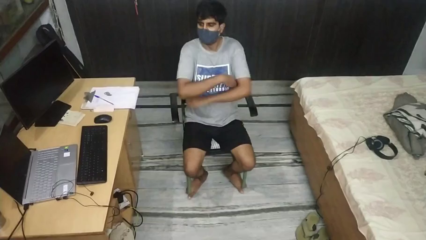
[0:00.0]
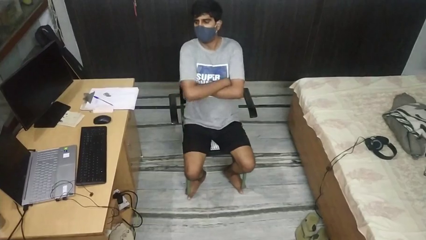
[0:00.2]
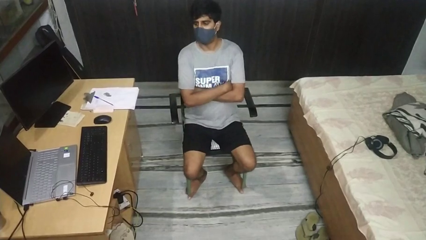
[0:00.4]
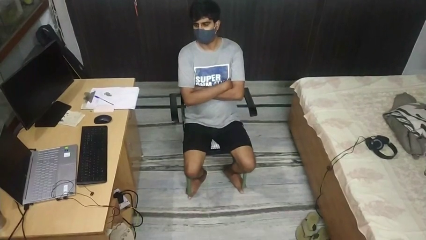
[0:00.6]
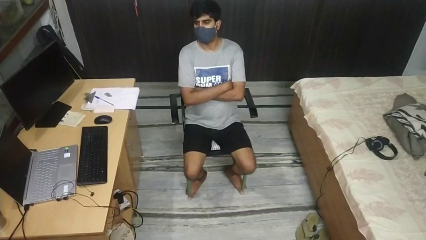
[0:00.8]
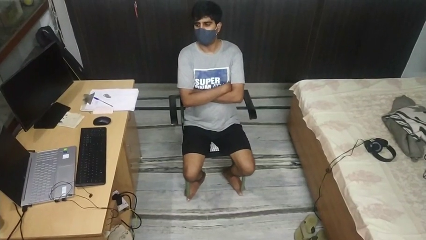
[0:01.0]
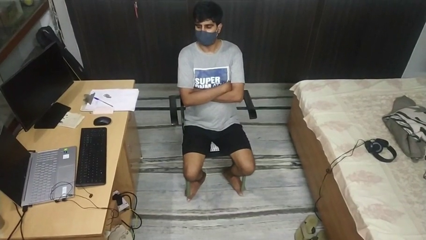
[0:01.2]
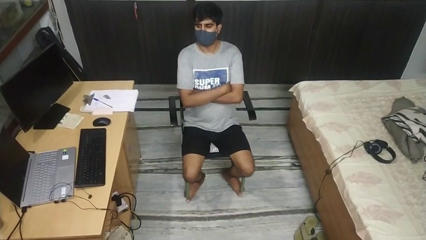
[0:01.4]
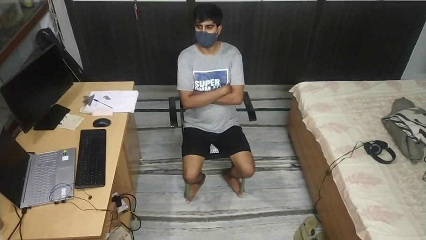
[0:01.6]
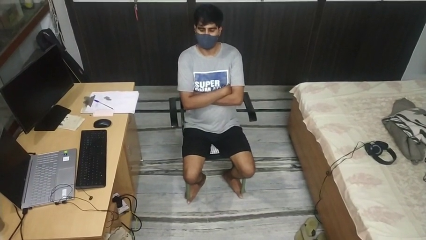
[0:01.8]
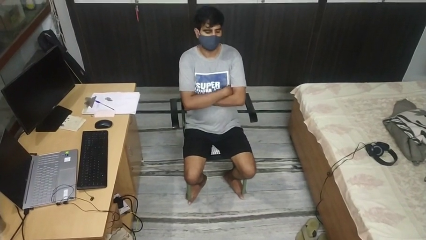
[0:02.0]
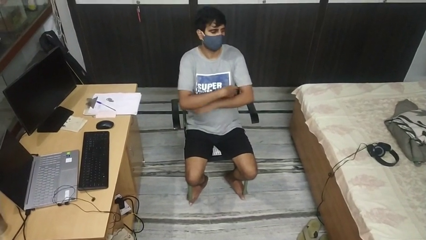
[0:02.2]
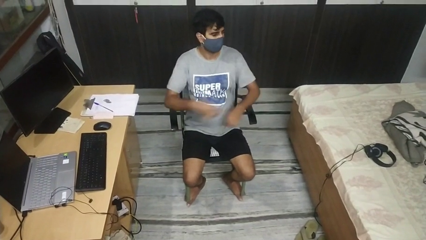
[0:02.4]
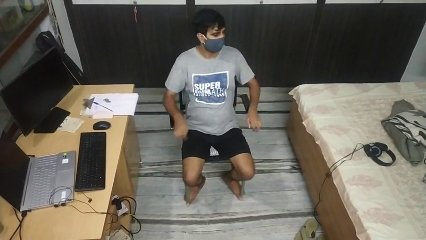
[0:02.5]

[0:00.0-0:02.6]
person crosses arms

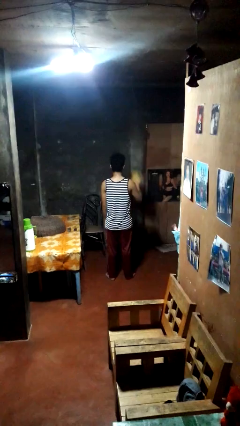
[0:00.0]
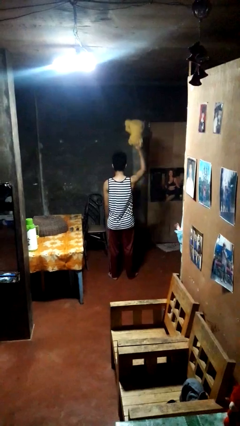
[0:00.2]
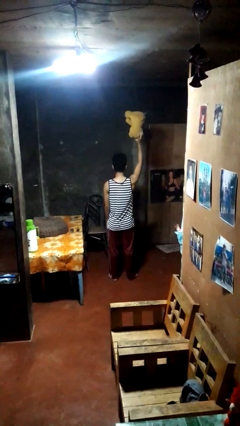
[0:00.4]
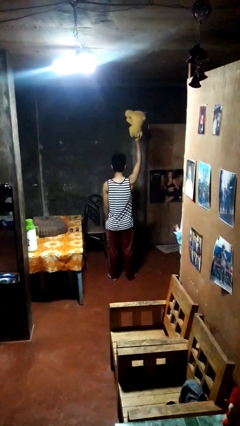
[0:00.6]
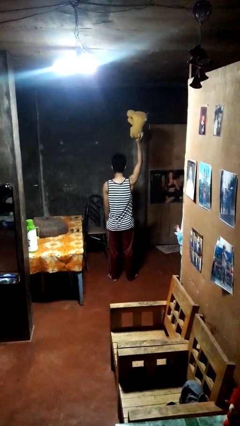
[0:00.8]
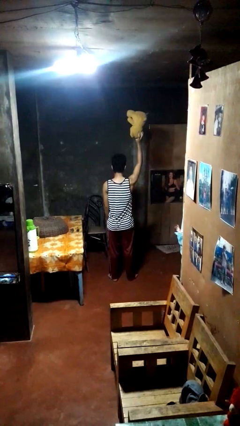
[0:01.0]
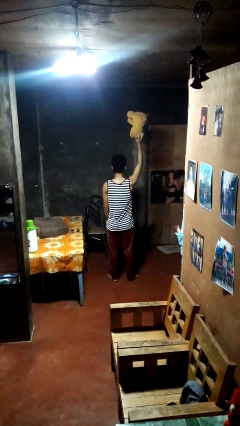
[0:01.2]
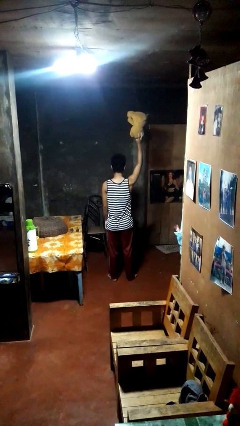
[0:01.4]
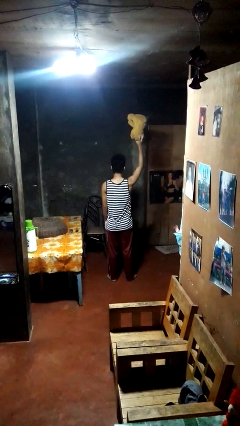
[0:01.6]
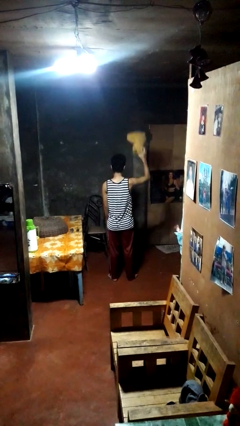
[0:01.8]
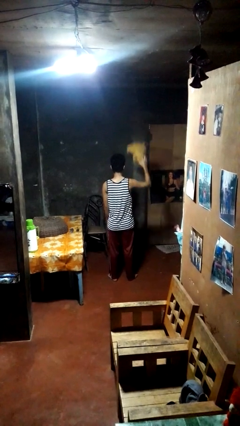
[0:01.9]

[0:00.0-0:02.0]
person holds object above head

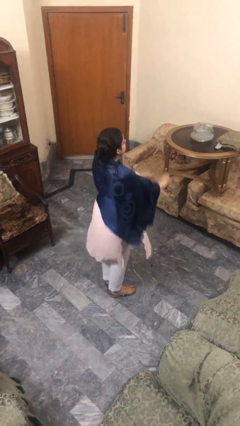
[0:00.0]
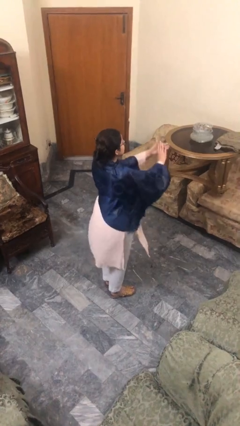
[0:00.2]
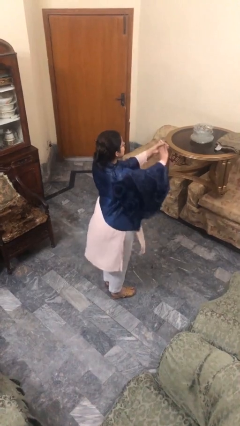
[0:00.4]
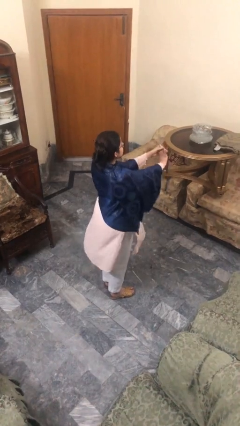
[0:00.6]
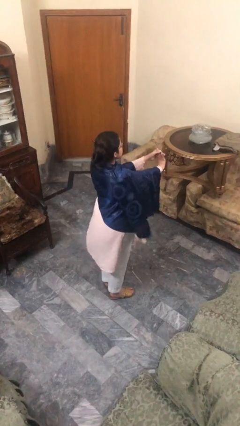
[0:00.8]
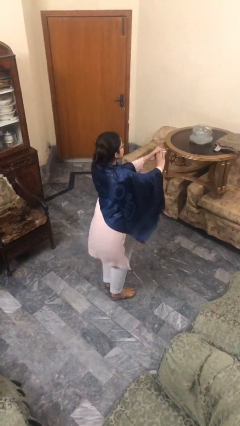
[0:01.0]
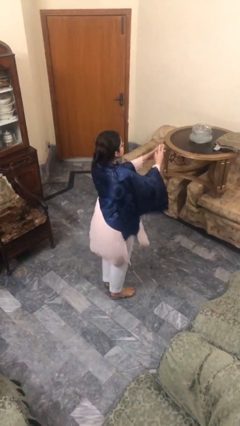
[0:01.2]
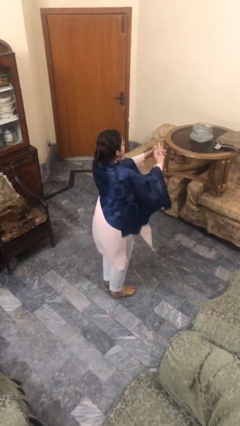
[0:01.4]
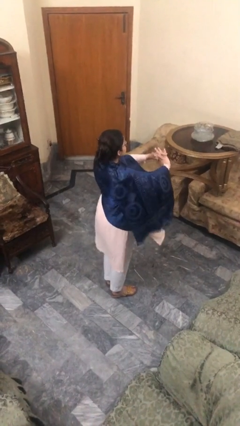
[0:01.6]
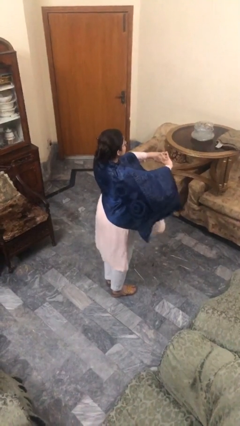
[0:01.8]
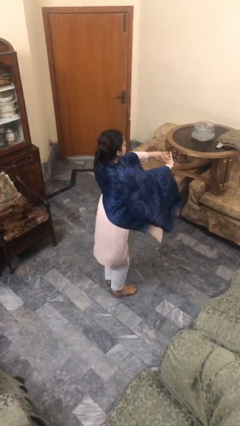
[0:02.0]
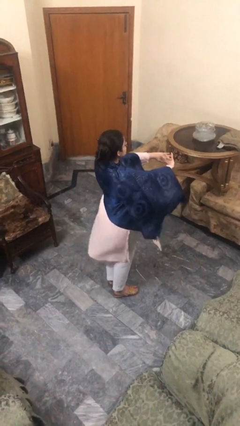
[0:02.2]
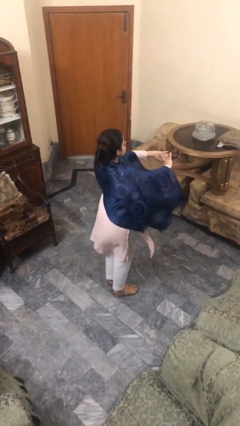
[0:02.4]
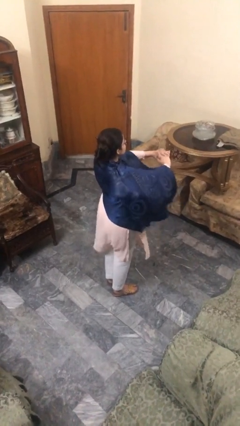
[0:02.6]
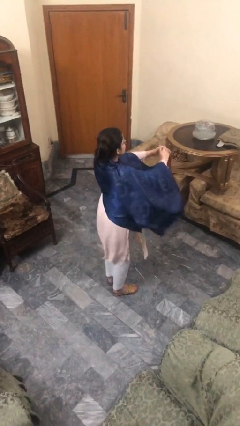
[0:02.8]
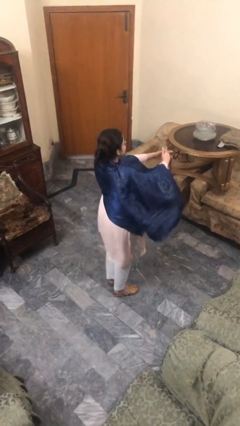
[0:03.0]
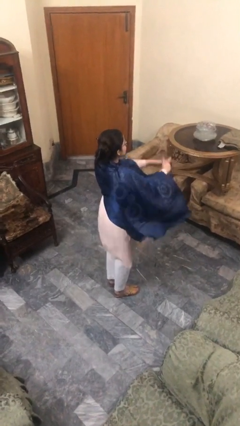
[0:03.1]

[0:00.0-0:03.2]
person cracks knuckles

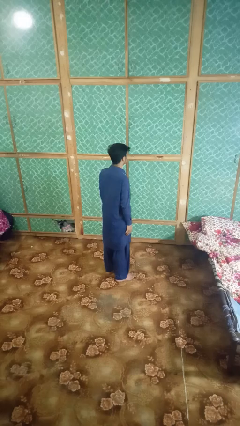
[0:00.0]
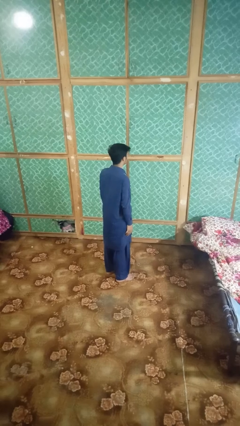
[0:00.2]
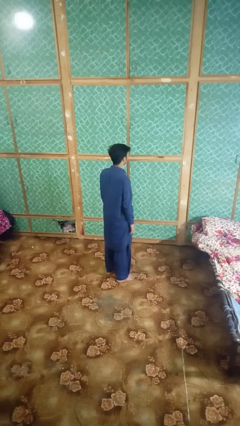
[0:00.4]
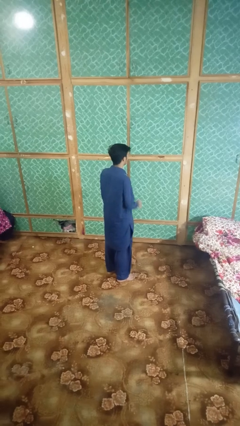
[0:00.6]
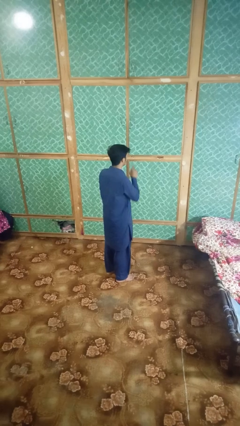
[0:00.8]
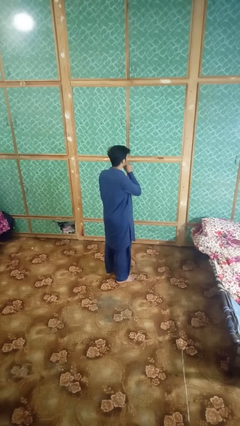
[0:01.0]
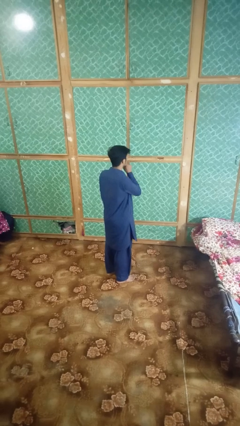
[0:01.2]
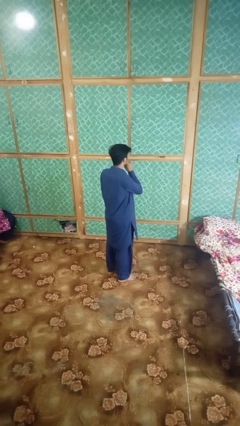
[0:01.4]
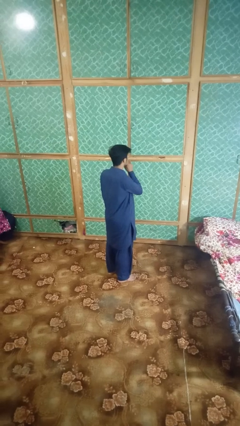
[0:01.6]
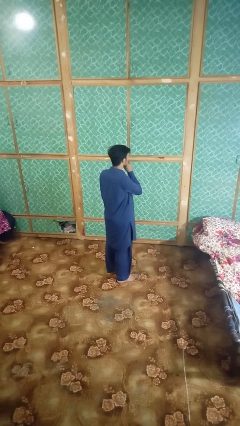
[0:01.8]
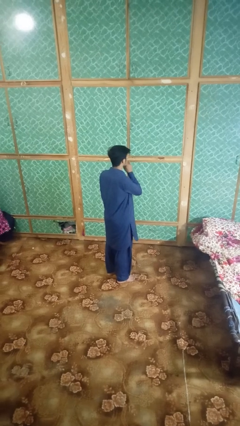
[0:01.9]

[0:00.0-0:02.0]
person gestures be quiet

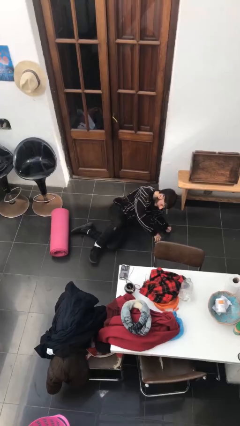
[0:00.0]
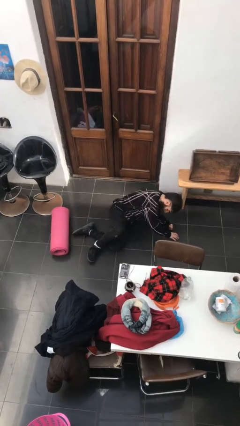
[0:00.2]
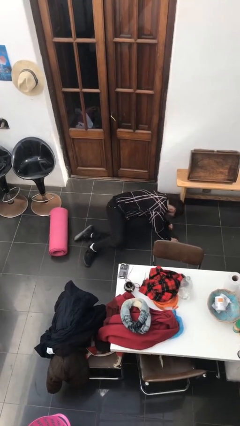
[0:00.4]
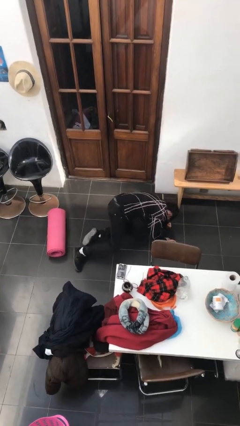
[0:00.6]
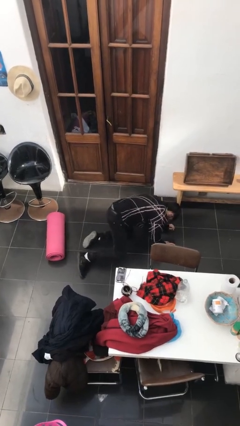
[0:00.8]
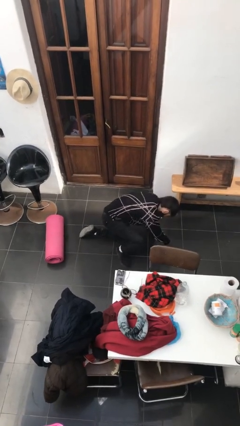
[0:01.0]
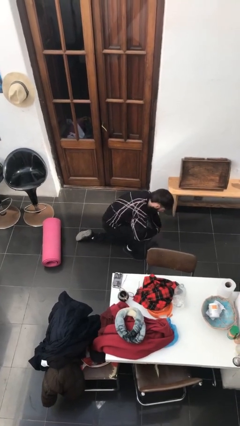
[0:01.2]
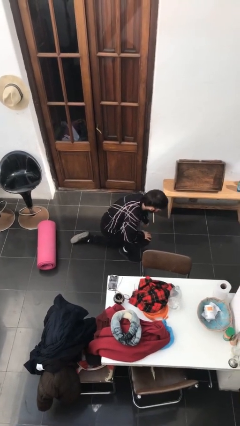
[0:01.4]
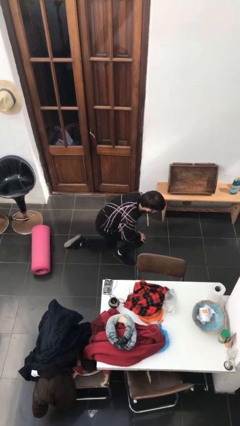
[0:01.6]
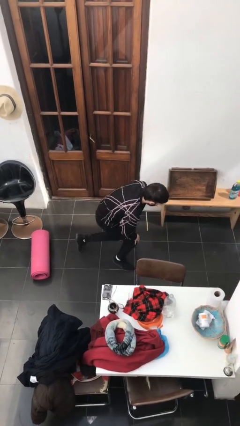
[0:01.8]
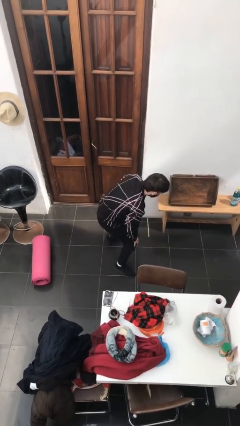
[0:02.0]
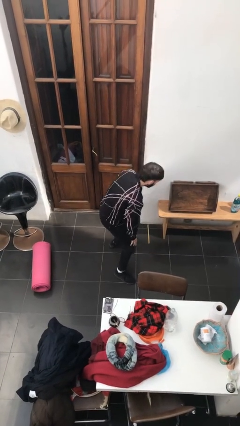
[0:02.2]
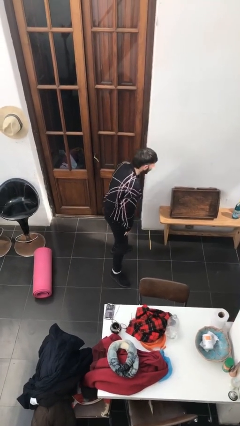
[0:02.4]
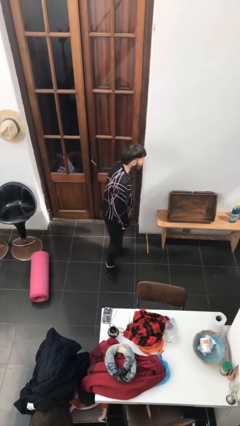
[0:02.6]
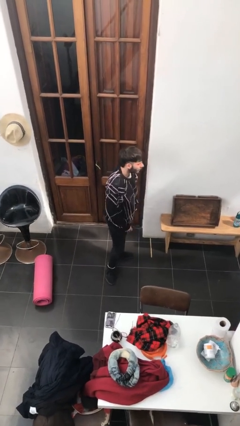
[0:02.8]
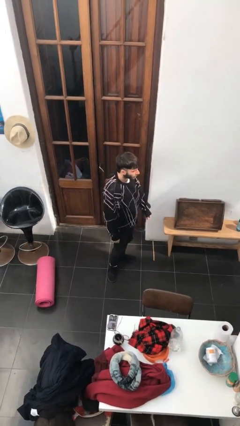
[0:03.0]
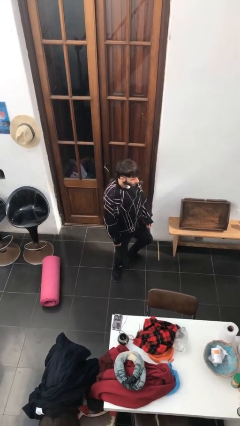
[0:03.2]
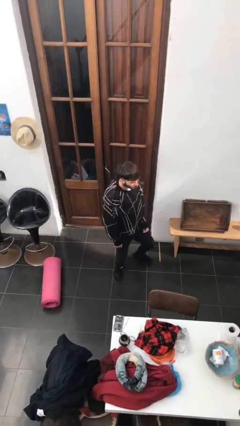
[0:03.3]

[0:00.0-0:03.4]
person stands up from floor

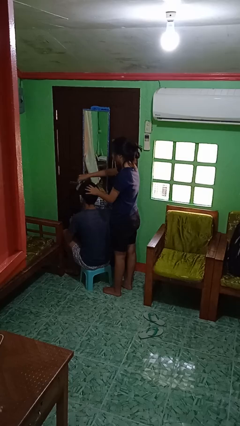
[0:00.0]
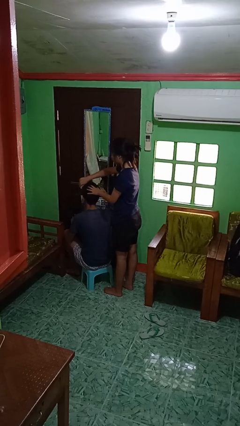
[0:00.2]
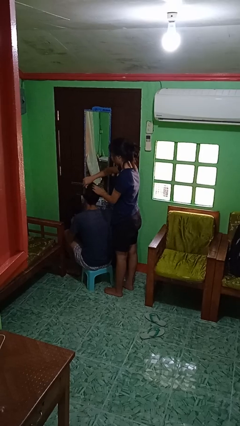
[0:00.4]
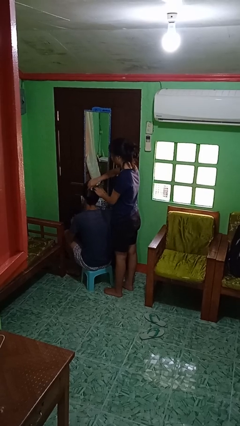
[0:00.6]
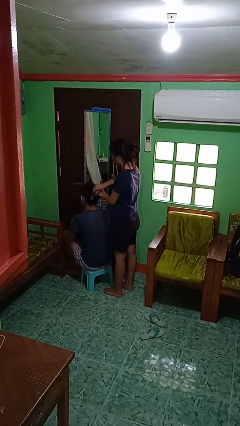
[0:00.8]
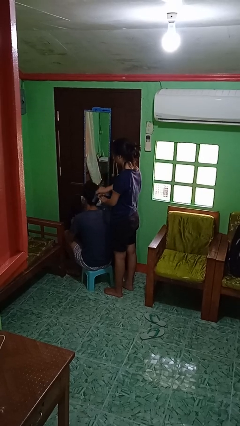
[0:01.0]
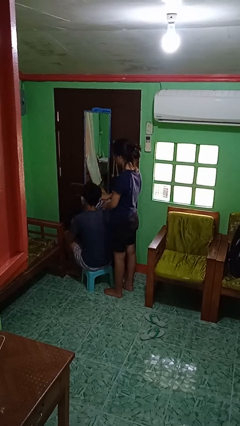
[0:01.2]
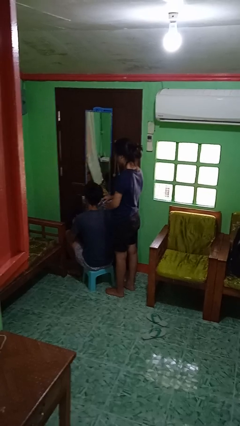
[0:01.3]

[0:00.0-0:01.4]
person brushes hair of person

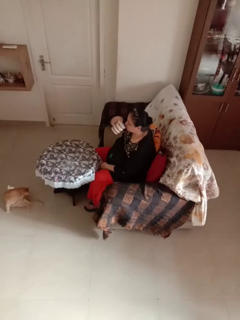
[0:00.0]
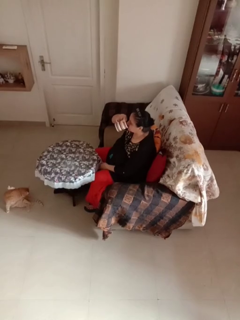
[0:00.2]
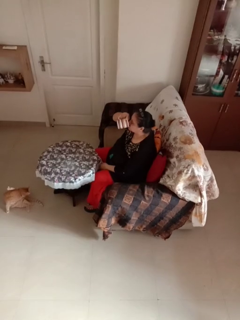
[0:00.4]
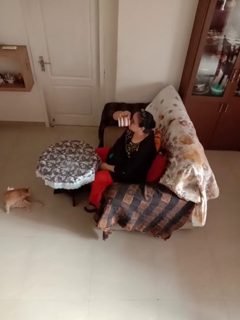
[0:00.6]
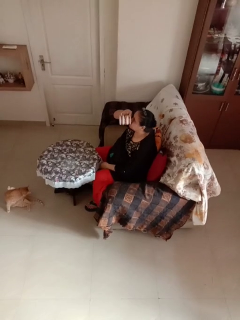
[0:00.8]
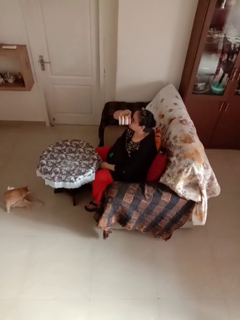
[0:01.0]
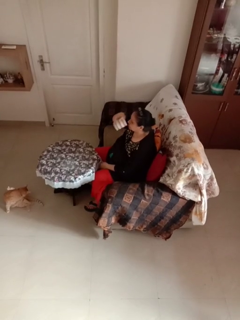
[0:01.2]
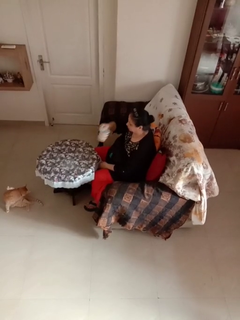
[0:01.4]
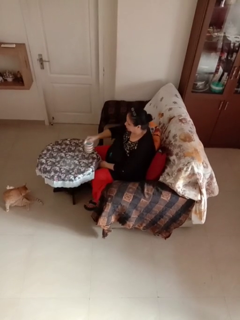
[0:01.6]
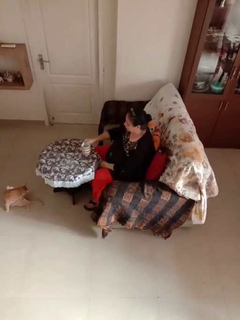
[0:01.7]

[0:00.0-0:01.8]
person drinks from mug

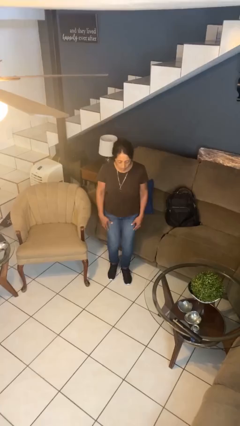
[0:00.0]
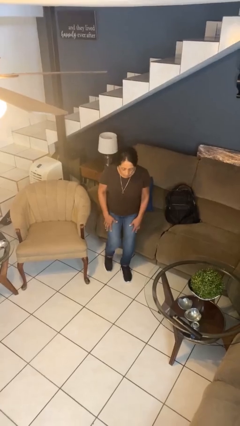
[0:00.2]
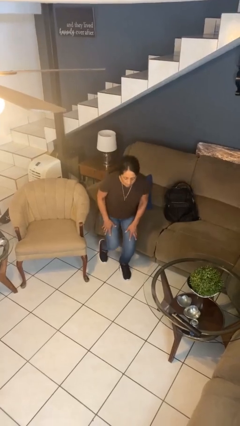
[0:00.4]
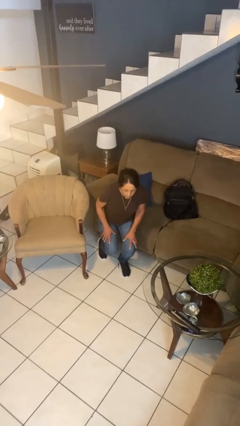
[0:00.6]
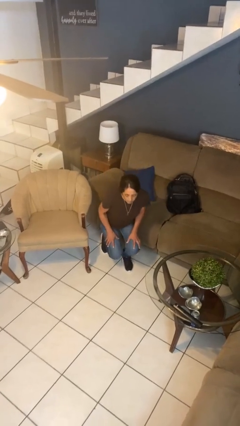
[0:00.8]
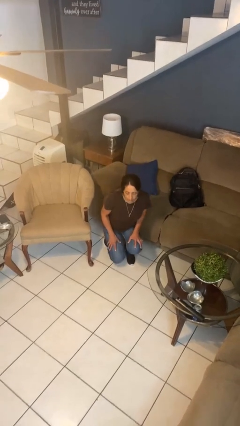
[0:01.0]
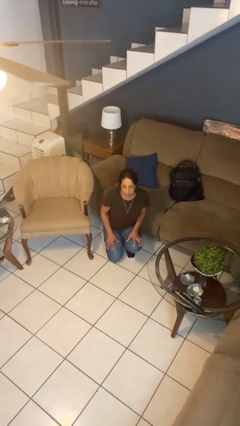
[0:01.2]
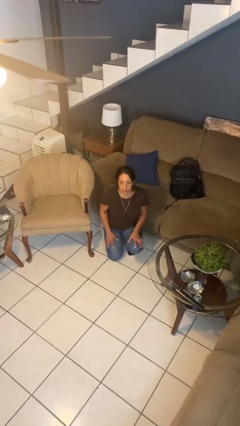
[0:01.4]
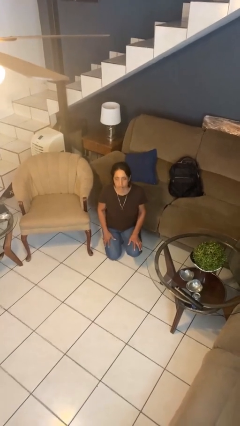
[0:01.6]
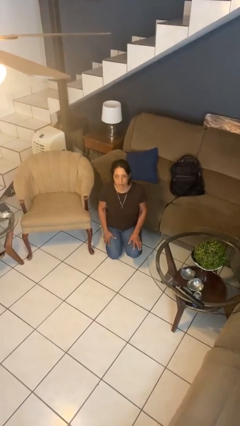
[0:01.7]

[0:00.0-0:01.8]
person kneels
